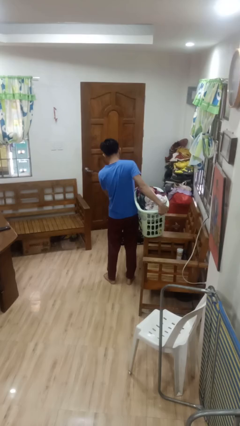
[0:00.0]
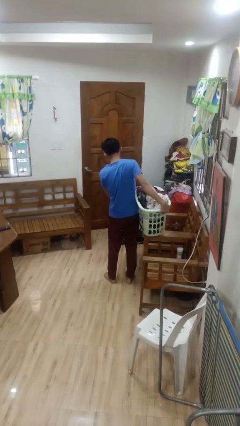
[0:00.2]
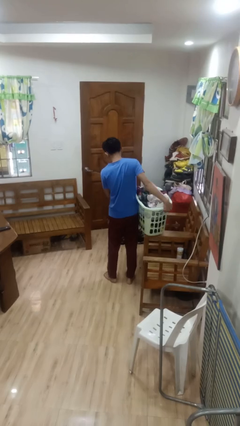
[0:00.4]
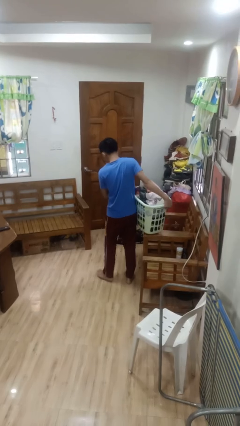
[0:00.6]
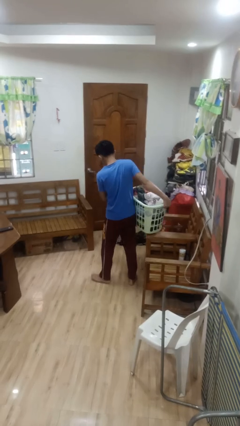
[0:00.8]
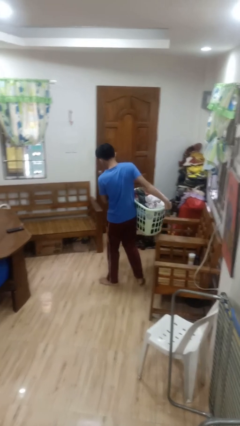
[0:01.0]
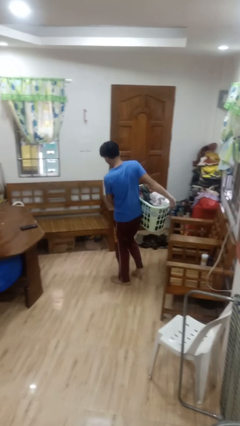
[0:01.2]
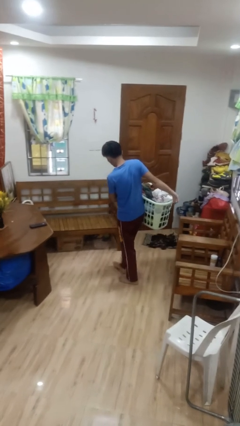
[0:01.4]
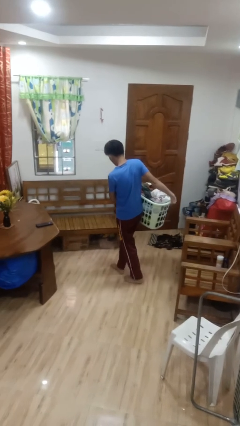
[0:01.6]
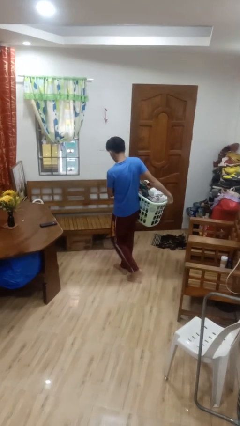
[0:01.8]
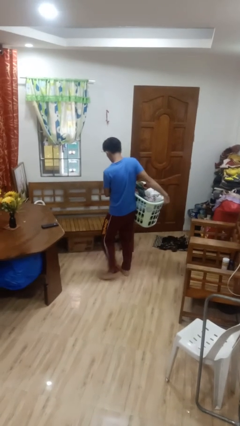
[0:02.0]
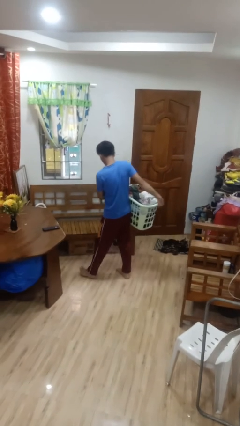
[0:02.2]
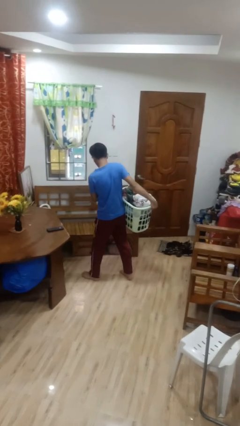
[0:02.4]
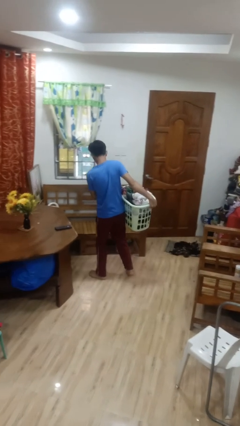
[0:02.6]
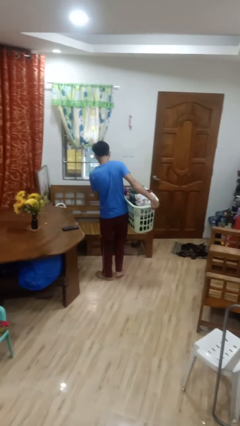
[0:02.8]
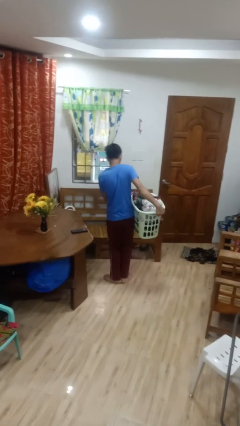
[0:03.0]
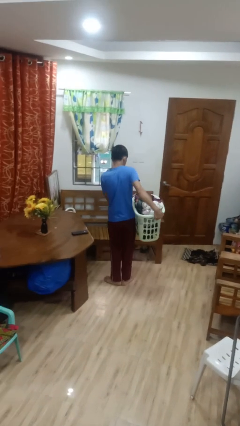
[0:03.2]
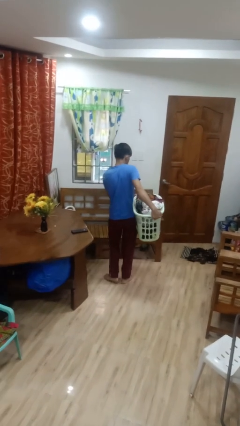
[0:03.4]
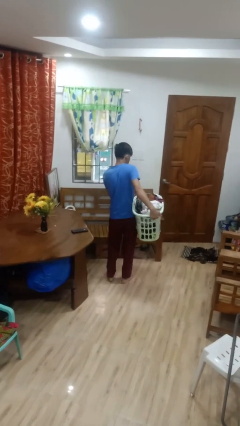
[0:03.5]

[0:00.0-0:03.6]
person carries laundry basket

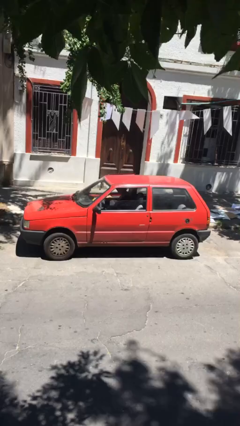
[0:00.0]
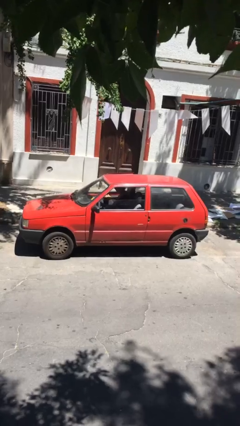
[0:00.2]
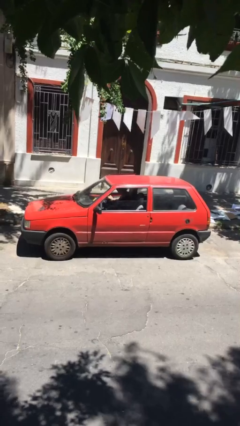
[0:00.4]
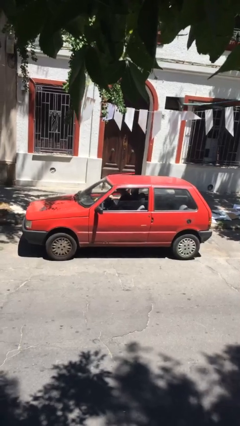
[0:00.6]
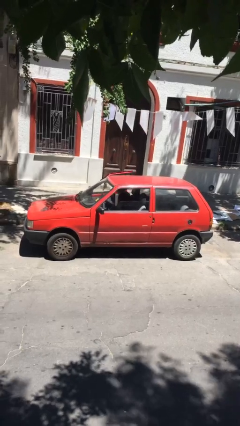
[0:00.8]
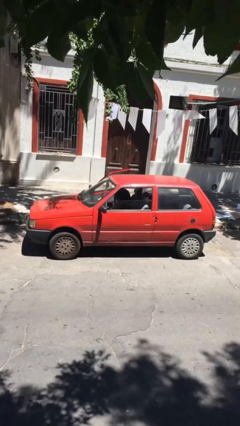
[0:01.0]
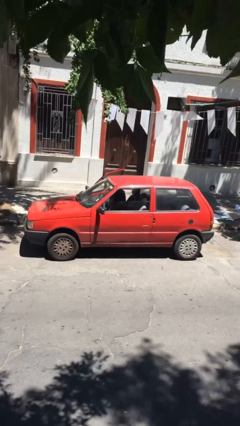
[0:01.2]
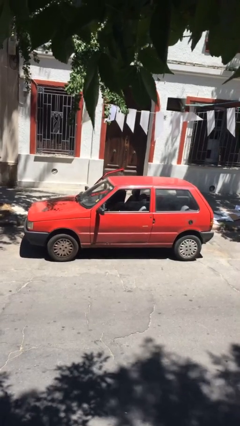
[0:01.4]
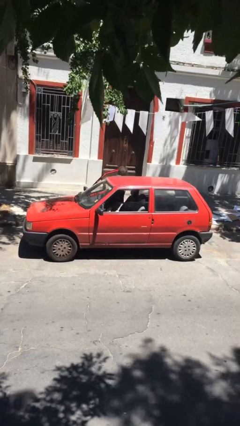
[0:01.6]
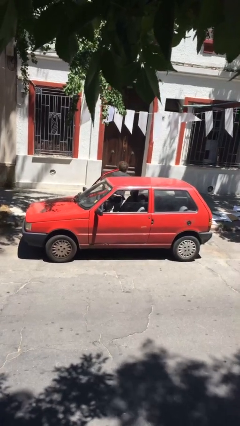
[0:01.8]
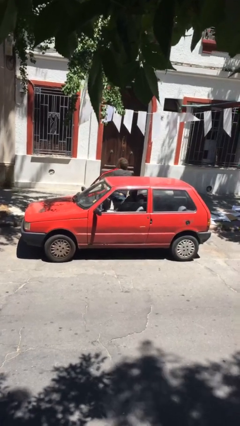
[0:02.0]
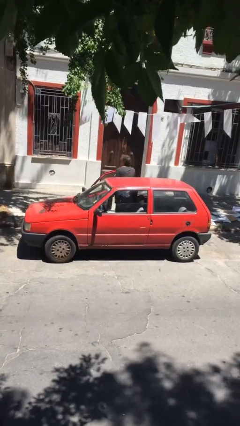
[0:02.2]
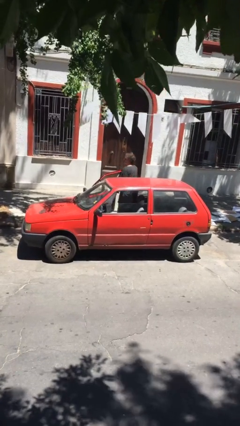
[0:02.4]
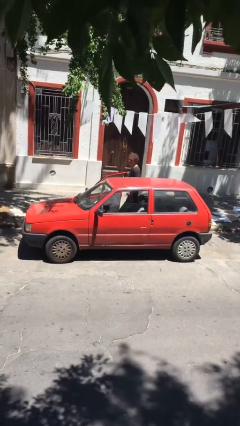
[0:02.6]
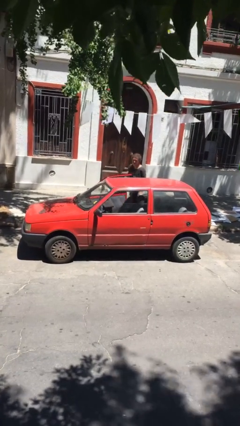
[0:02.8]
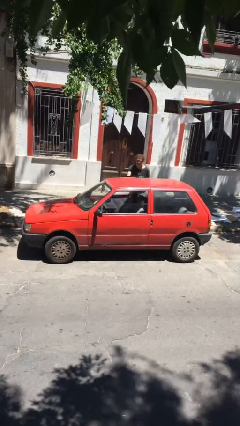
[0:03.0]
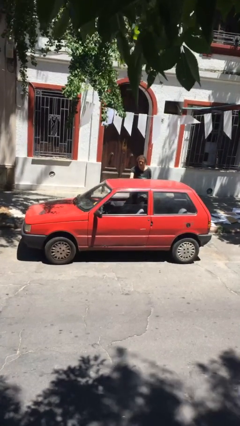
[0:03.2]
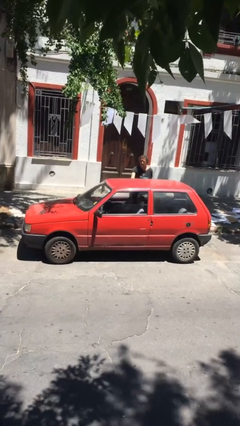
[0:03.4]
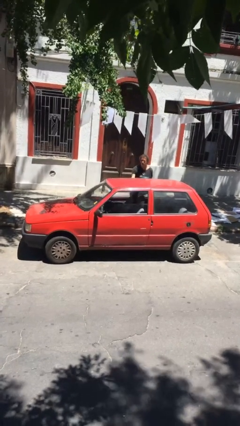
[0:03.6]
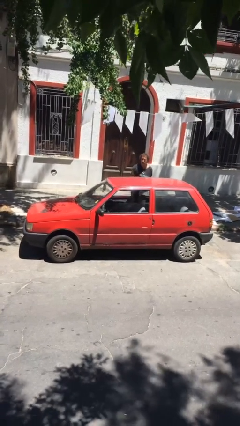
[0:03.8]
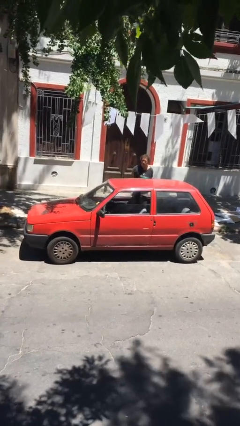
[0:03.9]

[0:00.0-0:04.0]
car drops off person

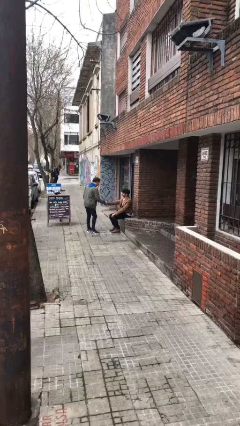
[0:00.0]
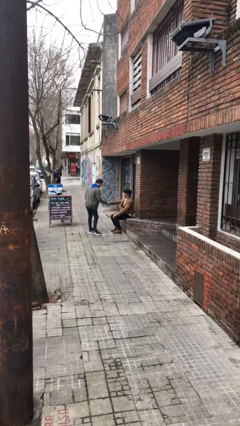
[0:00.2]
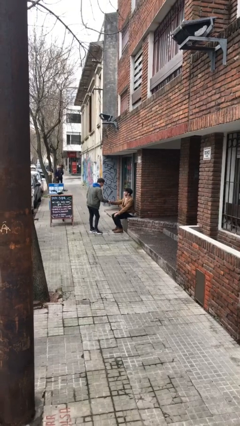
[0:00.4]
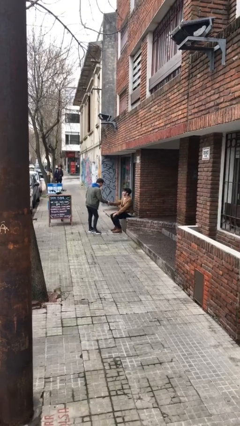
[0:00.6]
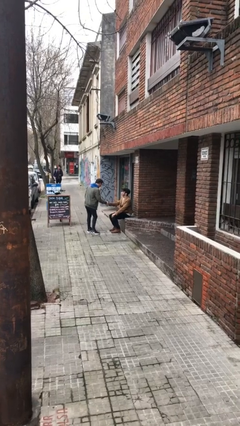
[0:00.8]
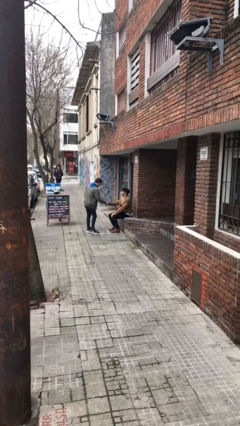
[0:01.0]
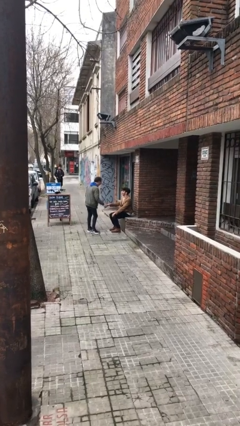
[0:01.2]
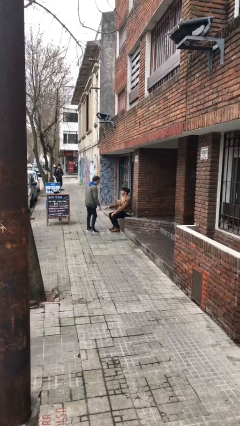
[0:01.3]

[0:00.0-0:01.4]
person shakes hand

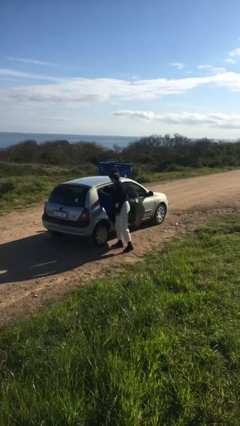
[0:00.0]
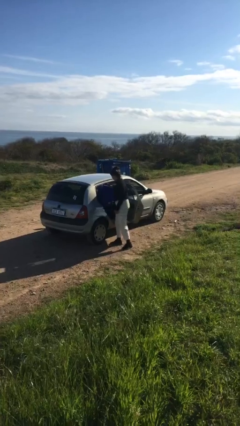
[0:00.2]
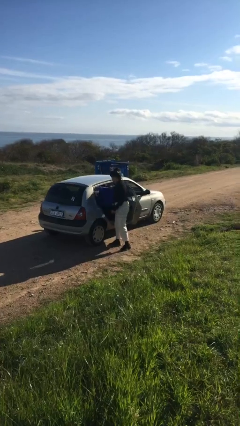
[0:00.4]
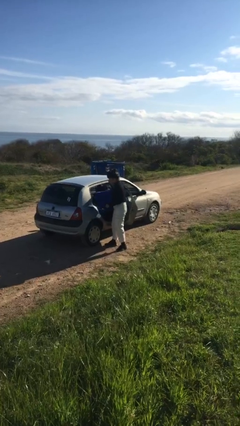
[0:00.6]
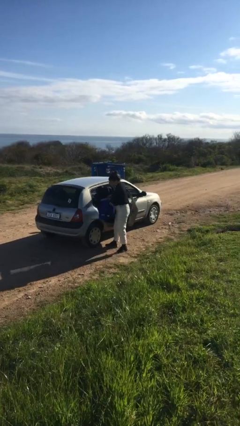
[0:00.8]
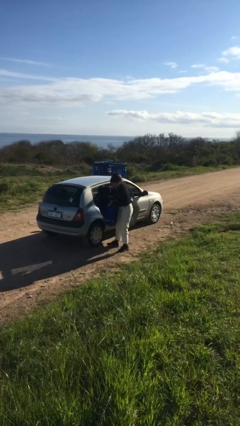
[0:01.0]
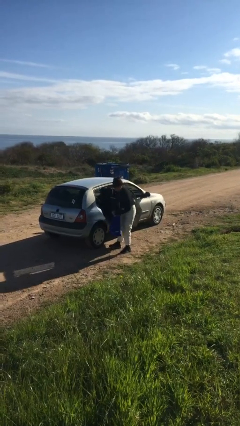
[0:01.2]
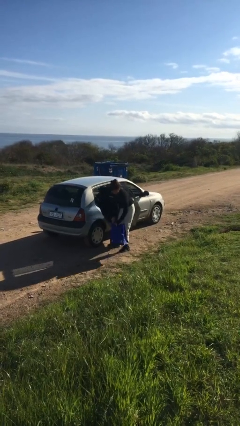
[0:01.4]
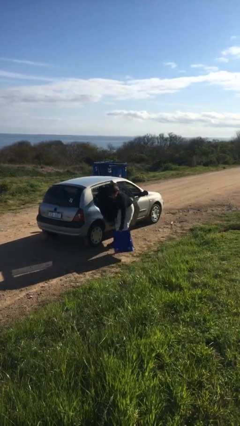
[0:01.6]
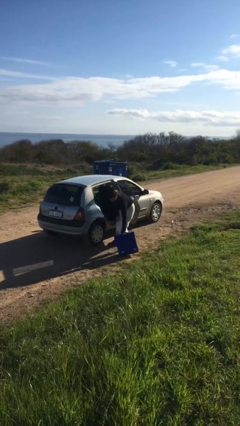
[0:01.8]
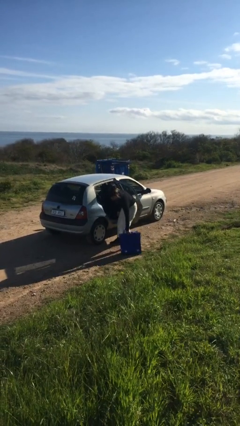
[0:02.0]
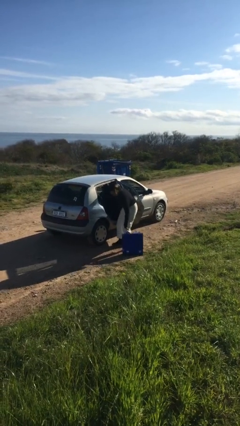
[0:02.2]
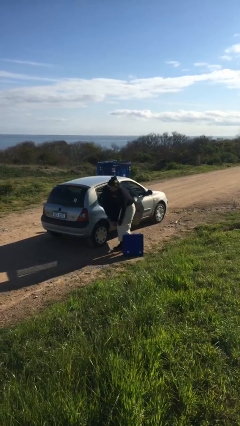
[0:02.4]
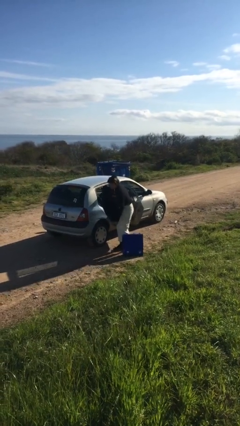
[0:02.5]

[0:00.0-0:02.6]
person unloads car

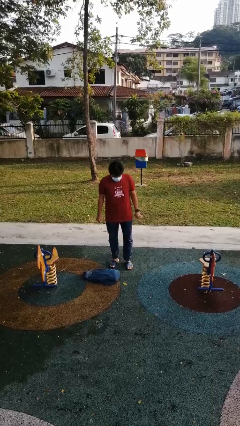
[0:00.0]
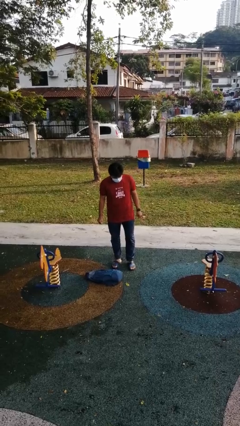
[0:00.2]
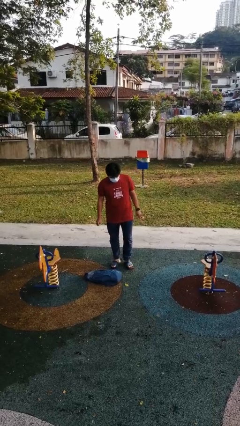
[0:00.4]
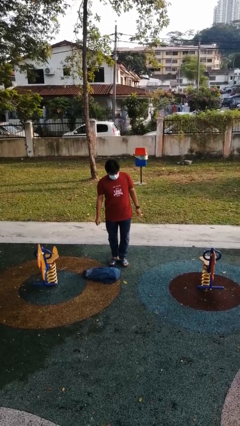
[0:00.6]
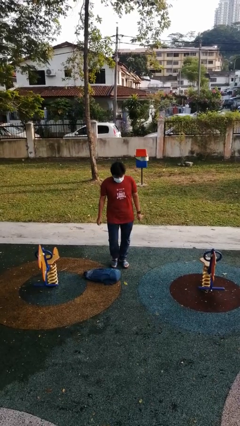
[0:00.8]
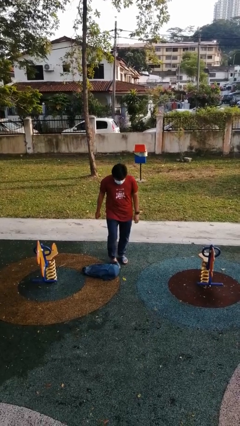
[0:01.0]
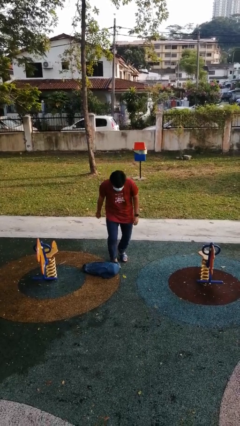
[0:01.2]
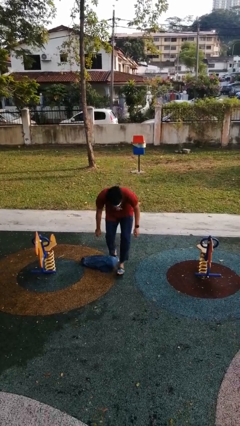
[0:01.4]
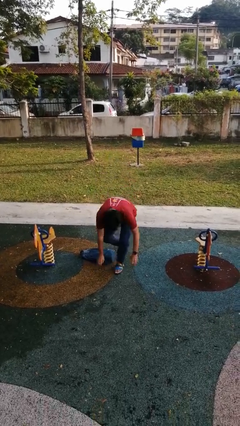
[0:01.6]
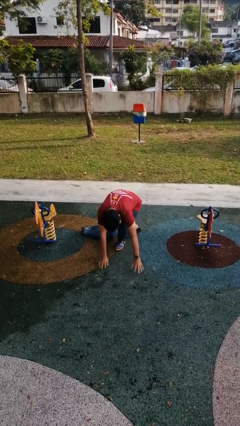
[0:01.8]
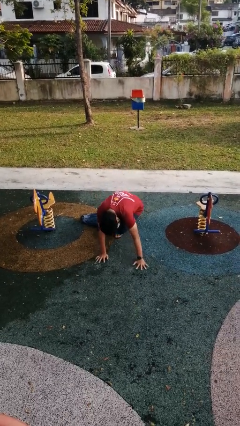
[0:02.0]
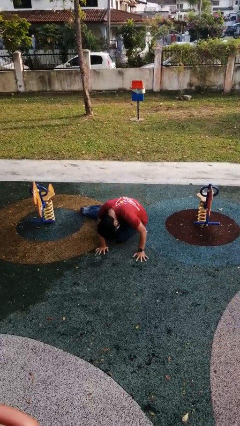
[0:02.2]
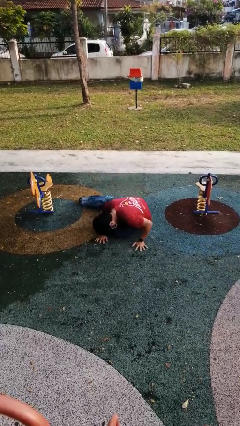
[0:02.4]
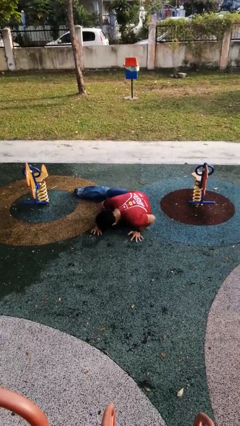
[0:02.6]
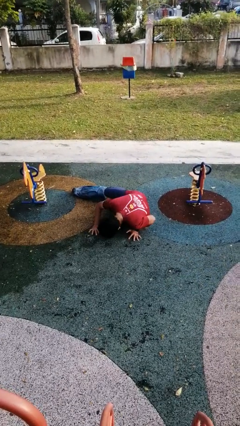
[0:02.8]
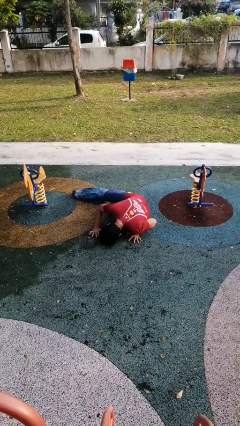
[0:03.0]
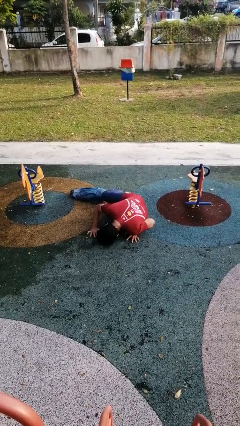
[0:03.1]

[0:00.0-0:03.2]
person trips on object on floor

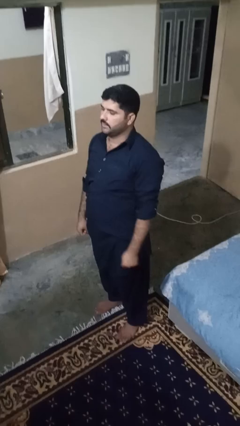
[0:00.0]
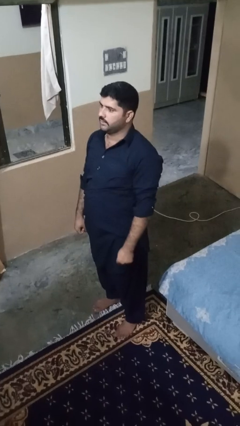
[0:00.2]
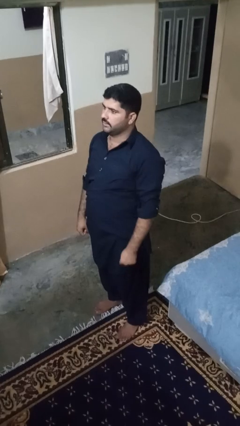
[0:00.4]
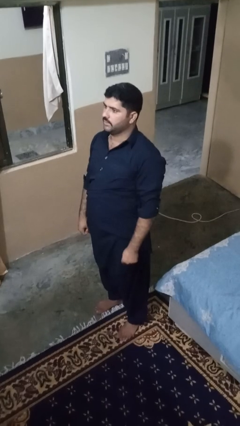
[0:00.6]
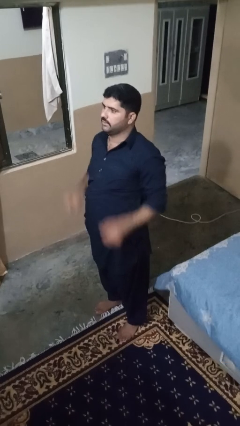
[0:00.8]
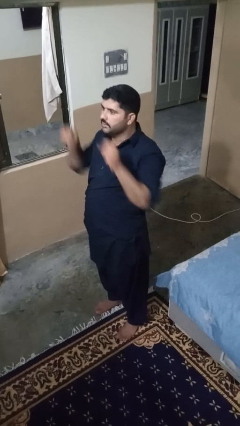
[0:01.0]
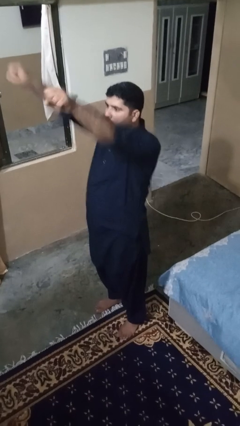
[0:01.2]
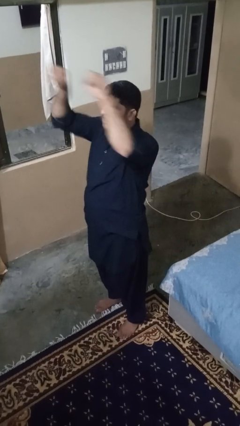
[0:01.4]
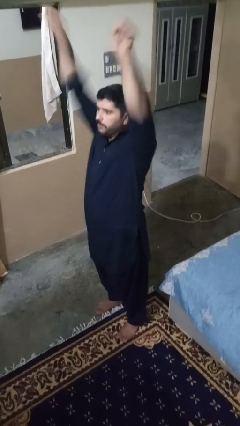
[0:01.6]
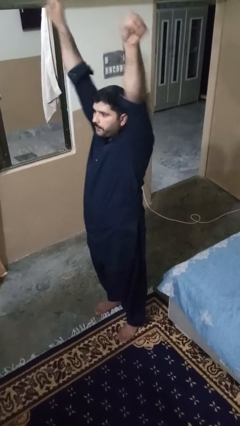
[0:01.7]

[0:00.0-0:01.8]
person punches

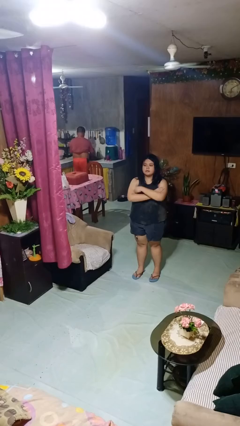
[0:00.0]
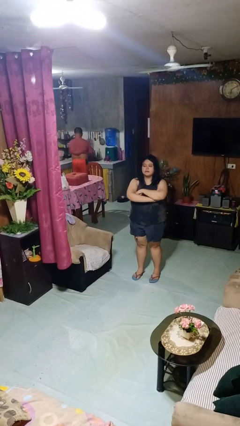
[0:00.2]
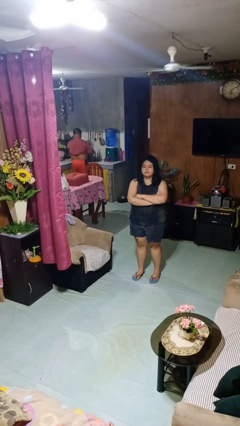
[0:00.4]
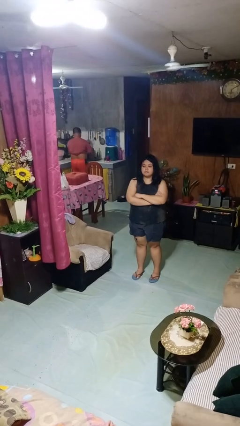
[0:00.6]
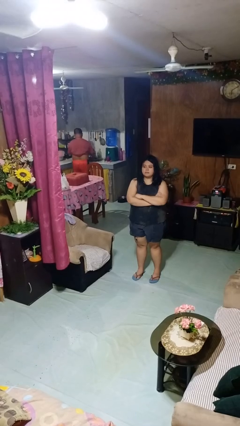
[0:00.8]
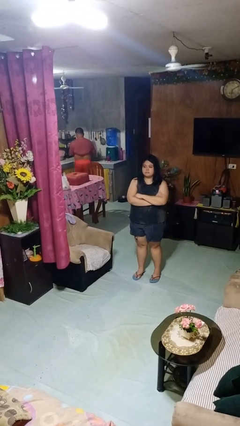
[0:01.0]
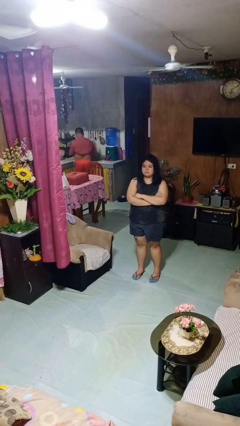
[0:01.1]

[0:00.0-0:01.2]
person crosses arms
